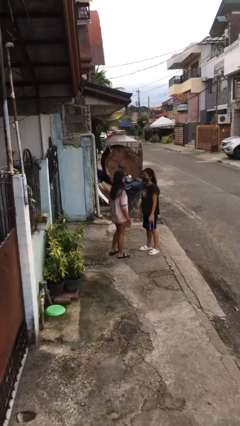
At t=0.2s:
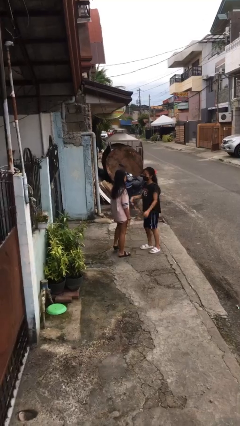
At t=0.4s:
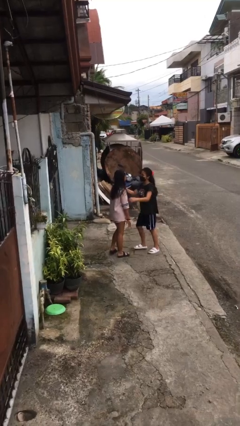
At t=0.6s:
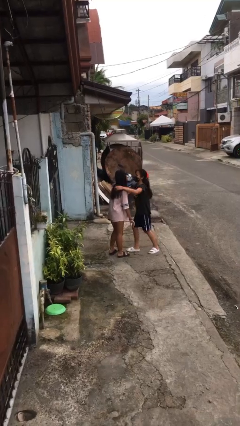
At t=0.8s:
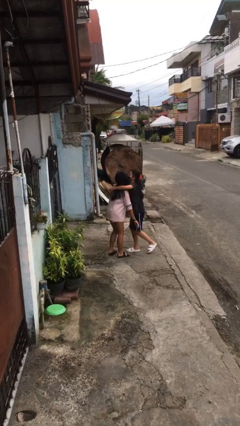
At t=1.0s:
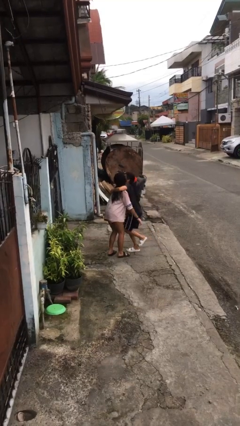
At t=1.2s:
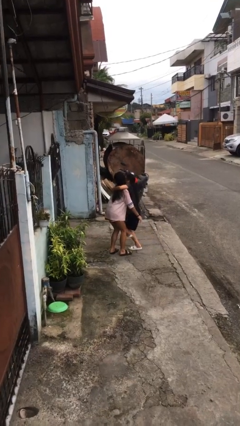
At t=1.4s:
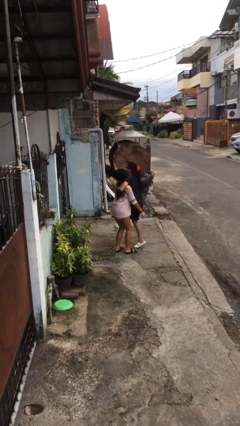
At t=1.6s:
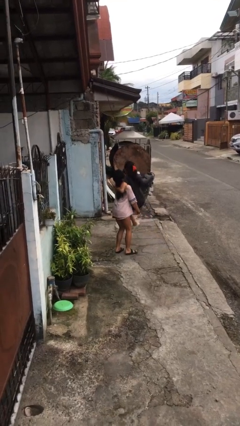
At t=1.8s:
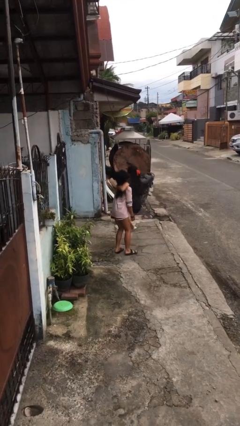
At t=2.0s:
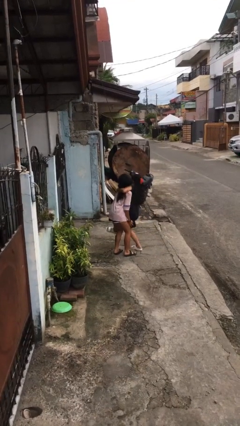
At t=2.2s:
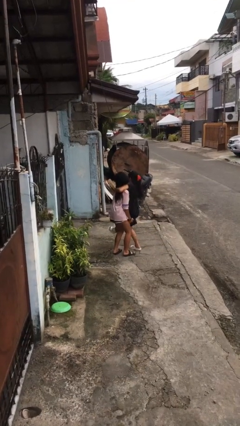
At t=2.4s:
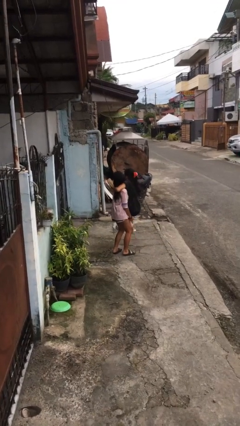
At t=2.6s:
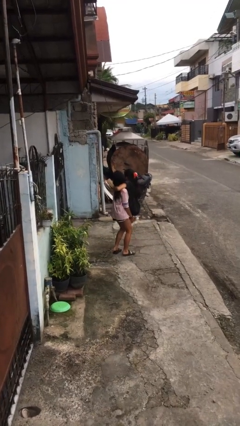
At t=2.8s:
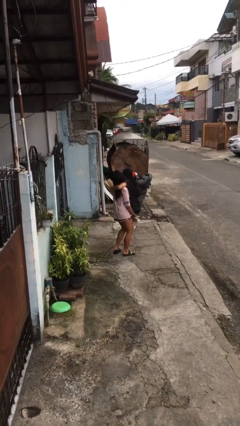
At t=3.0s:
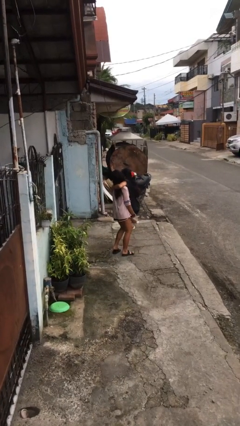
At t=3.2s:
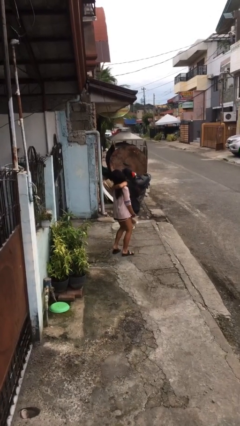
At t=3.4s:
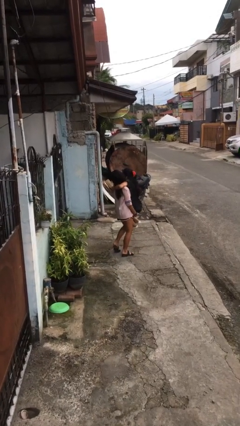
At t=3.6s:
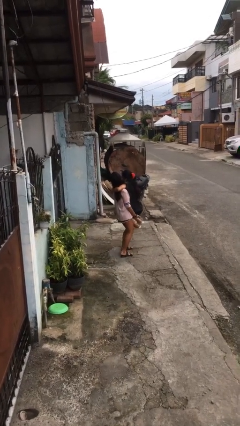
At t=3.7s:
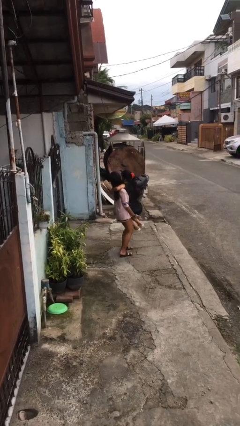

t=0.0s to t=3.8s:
person picks up person

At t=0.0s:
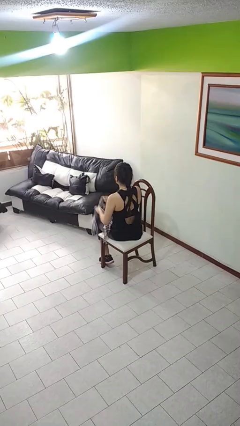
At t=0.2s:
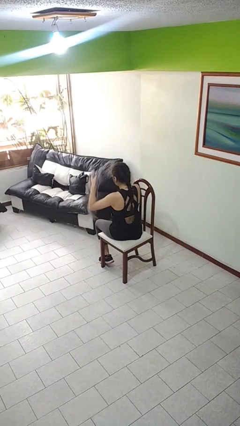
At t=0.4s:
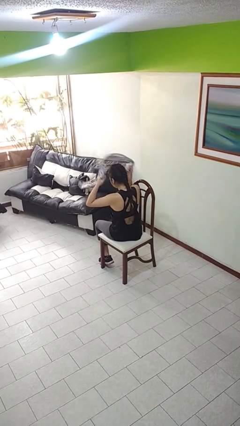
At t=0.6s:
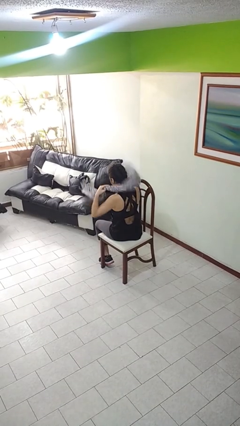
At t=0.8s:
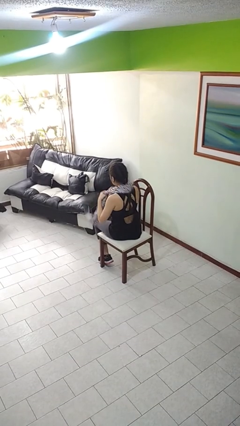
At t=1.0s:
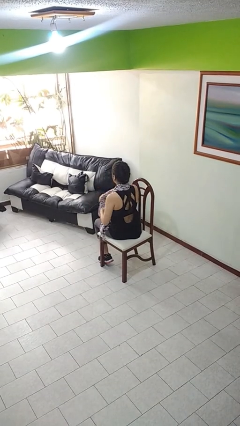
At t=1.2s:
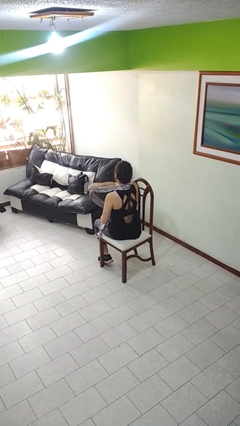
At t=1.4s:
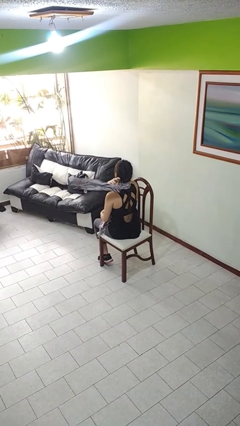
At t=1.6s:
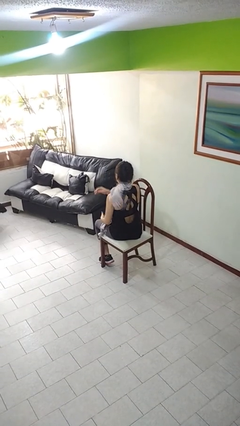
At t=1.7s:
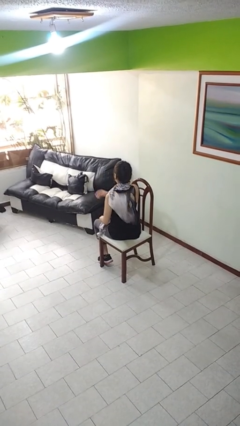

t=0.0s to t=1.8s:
person puts on scarf

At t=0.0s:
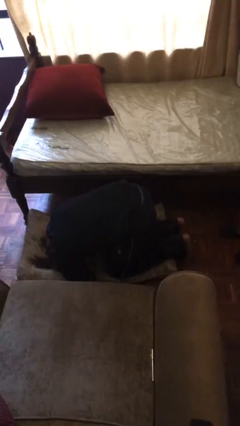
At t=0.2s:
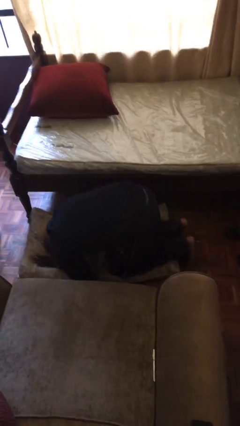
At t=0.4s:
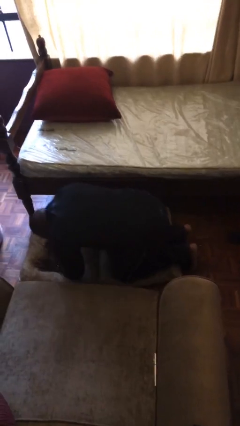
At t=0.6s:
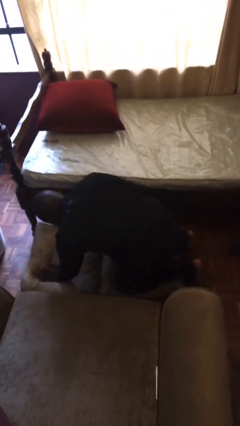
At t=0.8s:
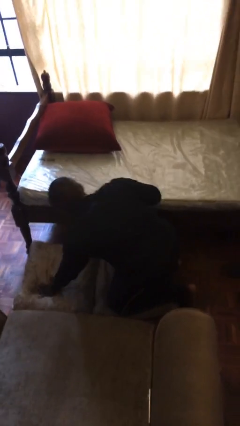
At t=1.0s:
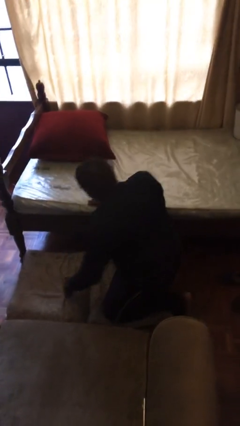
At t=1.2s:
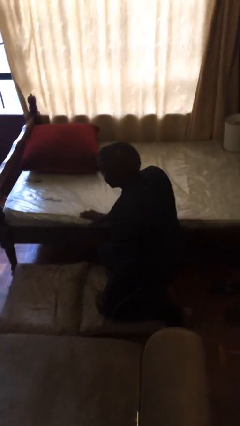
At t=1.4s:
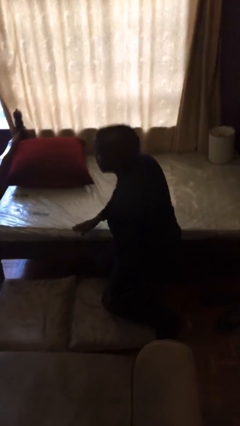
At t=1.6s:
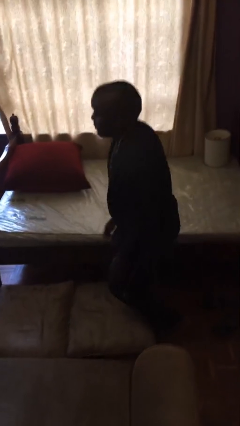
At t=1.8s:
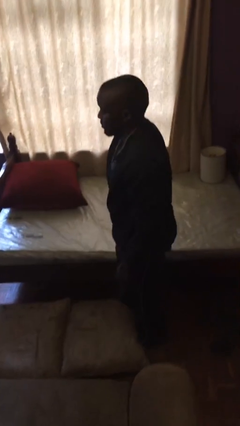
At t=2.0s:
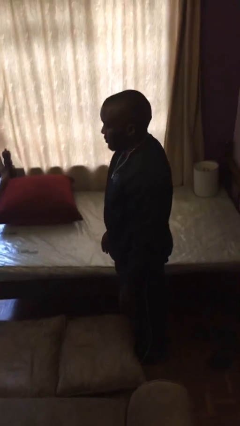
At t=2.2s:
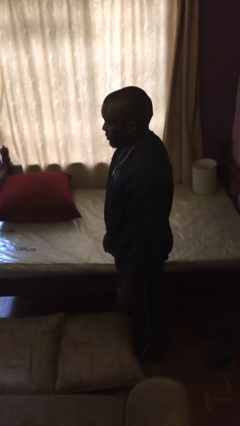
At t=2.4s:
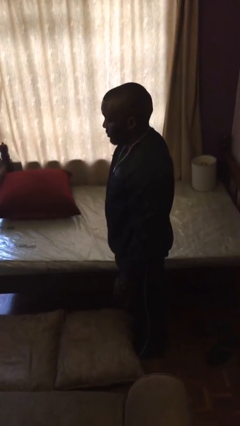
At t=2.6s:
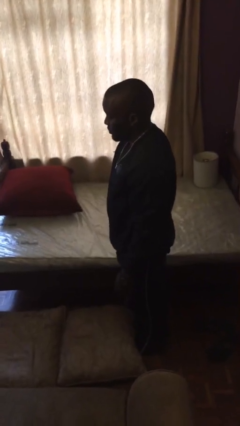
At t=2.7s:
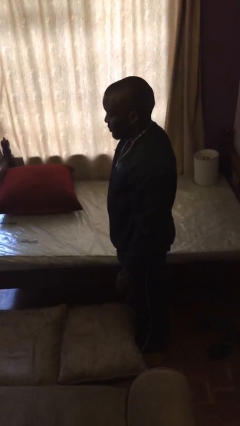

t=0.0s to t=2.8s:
person stands up from floor

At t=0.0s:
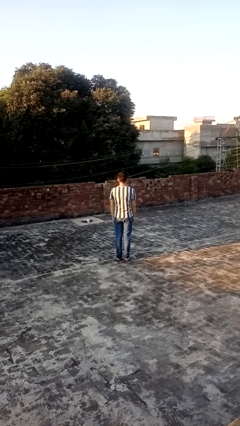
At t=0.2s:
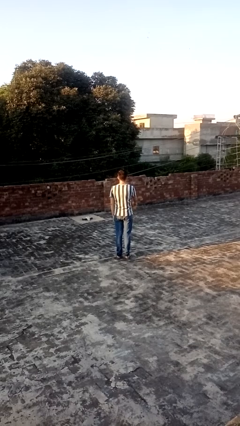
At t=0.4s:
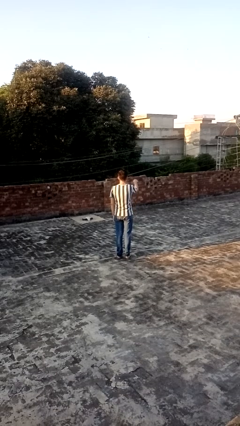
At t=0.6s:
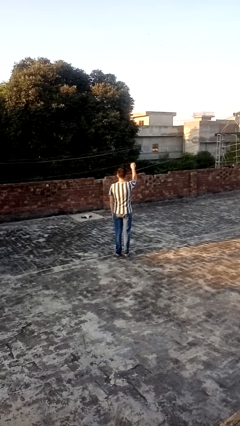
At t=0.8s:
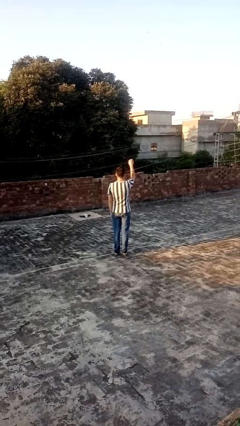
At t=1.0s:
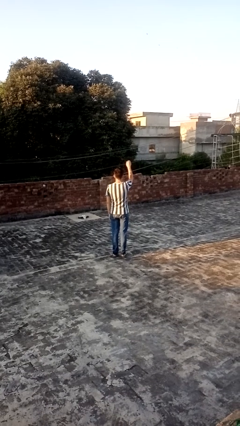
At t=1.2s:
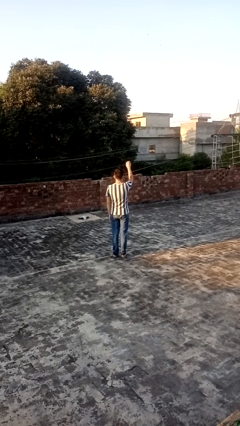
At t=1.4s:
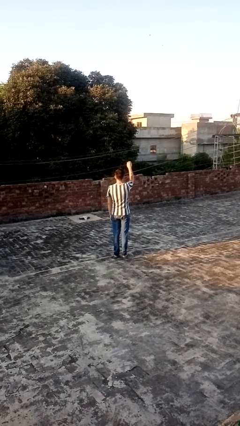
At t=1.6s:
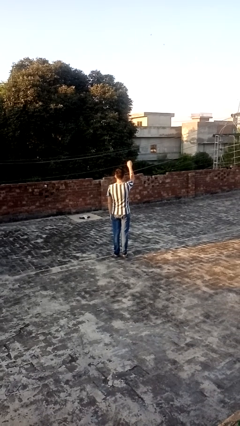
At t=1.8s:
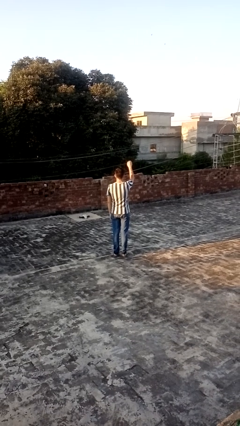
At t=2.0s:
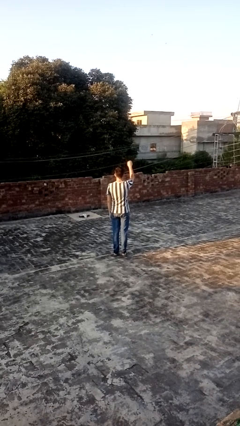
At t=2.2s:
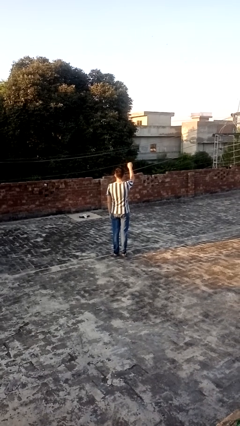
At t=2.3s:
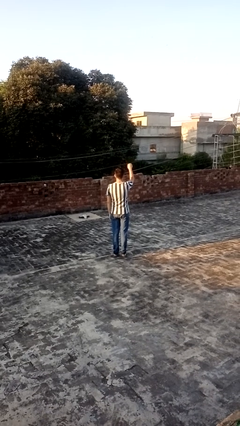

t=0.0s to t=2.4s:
person gestures swipe up

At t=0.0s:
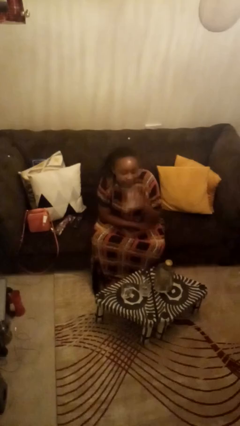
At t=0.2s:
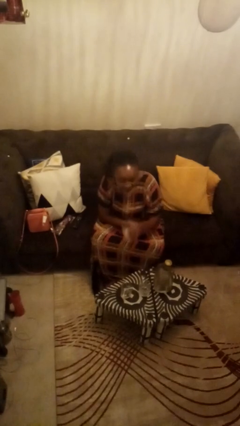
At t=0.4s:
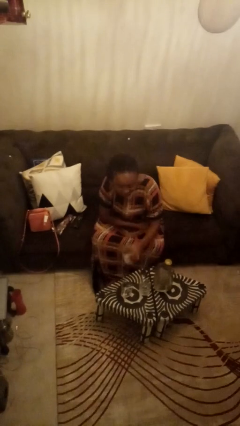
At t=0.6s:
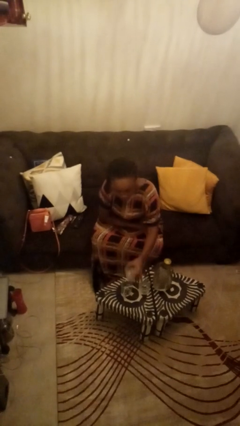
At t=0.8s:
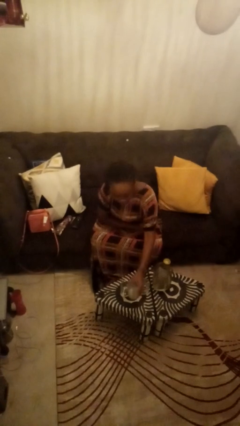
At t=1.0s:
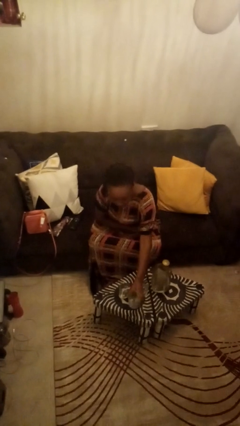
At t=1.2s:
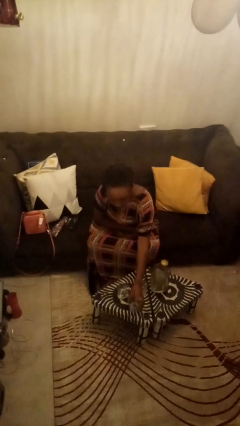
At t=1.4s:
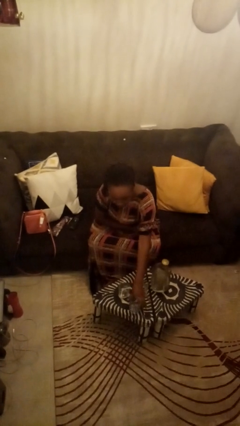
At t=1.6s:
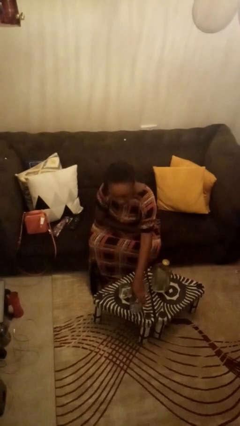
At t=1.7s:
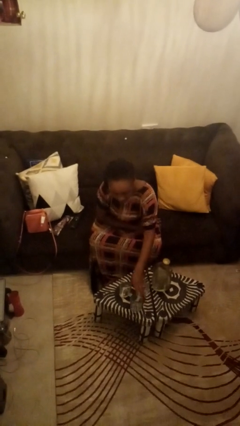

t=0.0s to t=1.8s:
person puts down object on table

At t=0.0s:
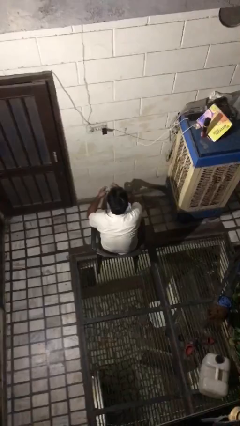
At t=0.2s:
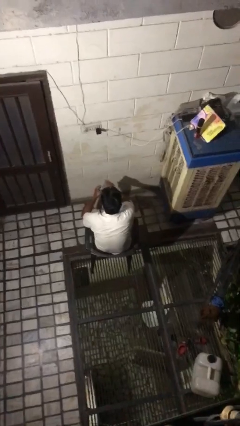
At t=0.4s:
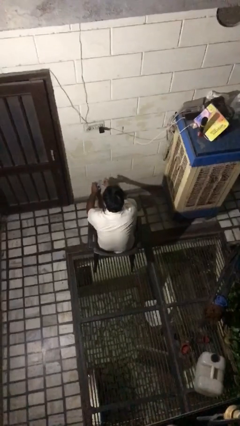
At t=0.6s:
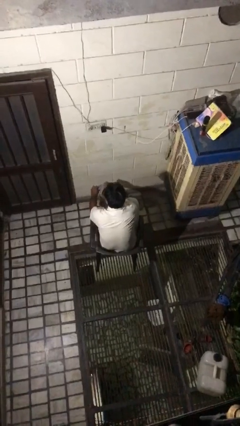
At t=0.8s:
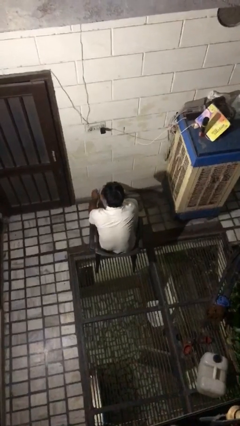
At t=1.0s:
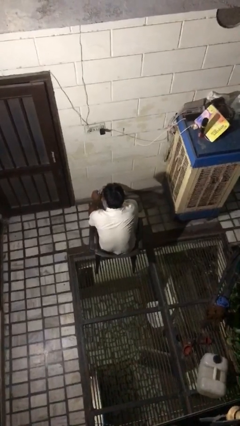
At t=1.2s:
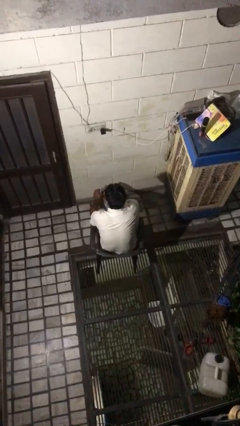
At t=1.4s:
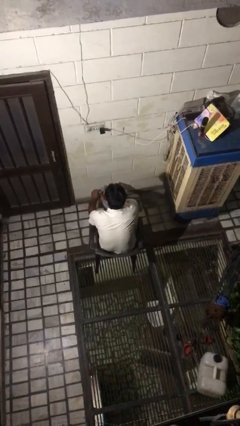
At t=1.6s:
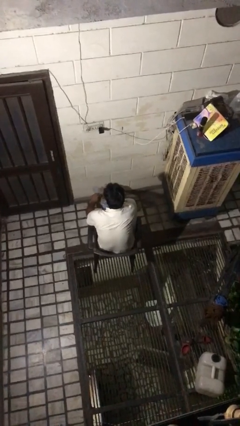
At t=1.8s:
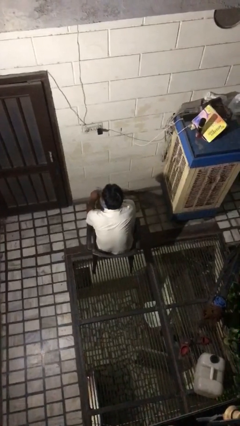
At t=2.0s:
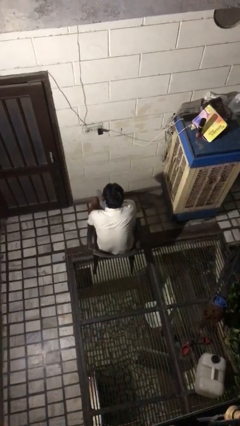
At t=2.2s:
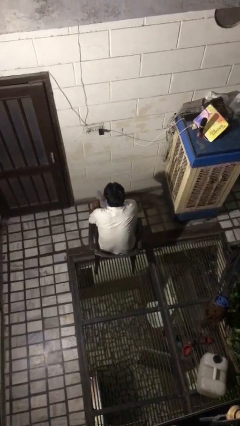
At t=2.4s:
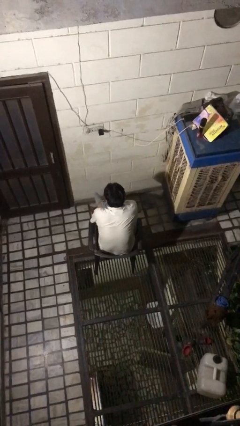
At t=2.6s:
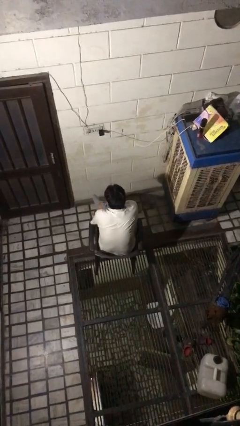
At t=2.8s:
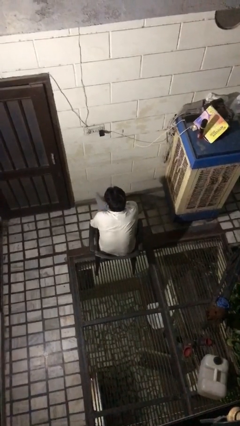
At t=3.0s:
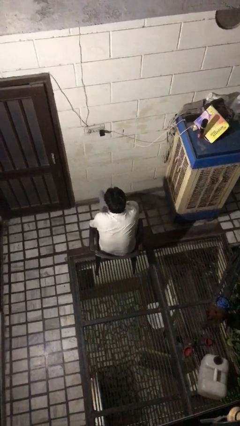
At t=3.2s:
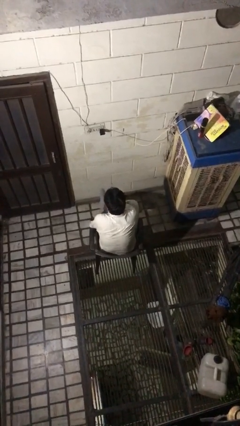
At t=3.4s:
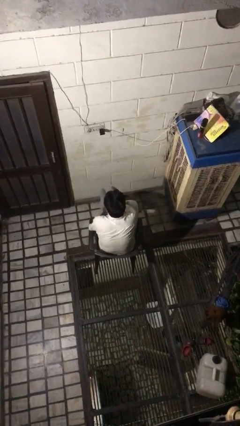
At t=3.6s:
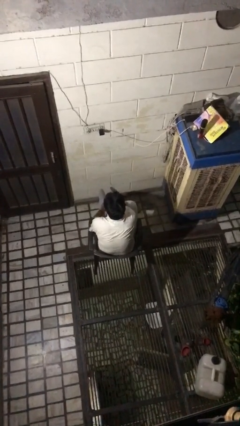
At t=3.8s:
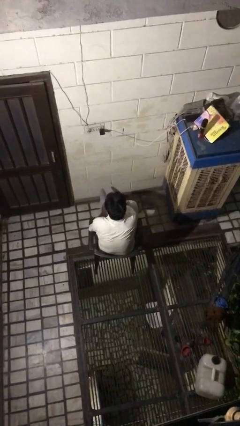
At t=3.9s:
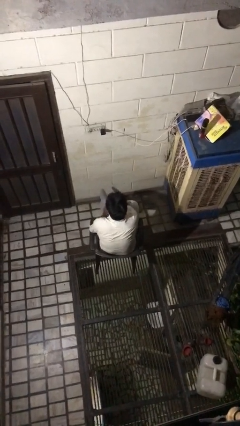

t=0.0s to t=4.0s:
person puts on socks

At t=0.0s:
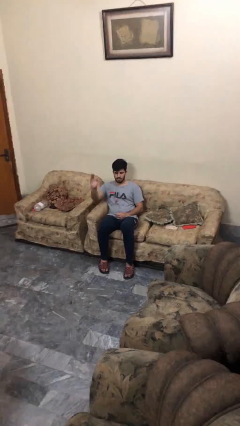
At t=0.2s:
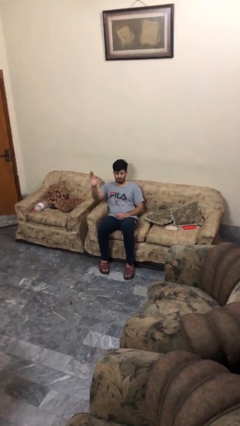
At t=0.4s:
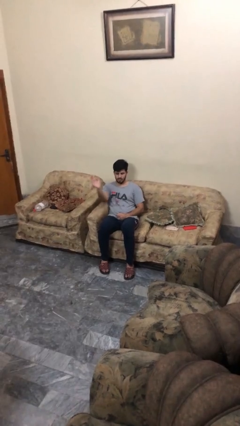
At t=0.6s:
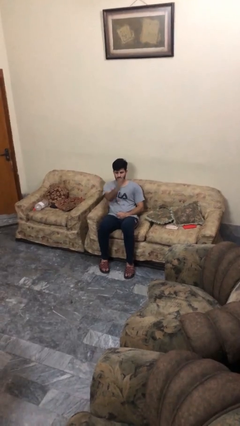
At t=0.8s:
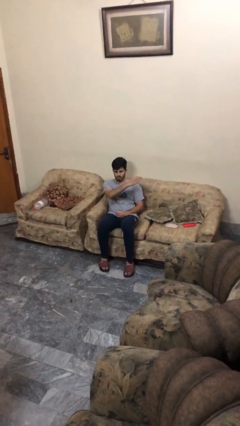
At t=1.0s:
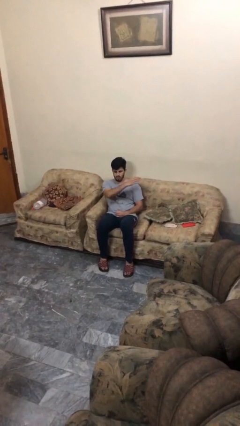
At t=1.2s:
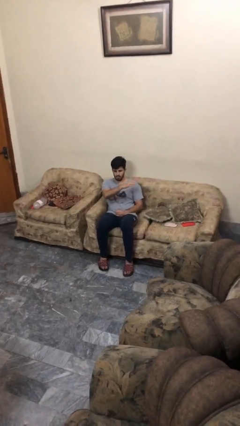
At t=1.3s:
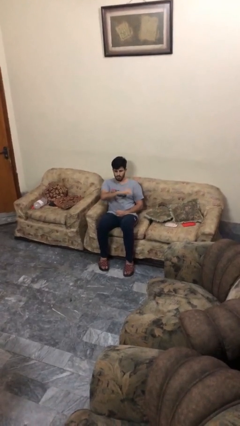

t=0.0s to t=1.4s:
person gestures swipe left
